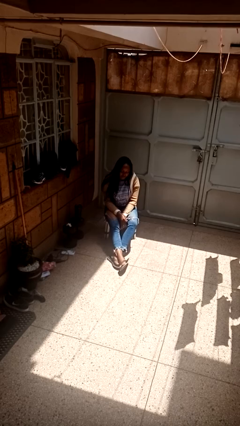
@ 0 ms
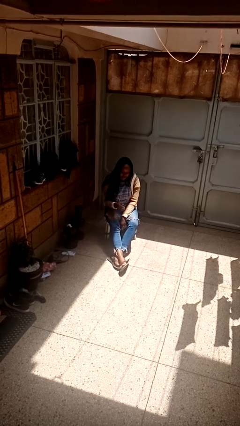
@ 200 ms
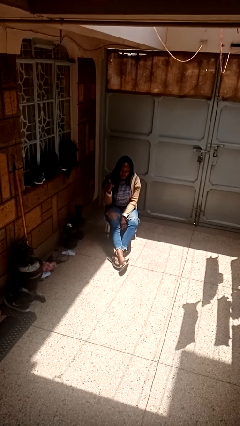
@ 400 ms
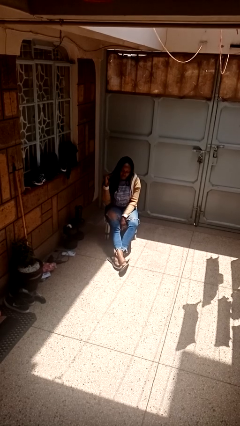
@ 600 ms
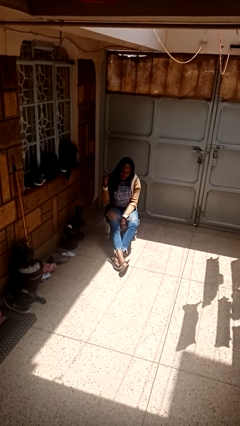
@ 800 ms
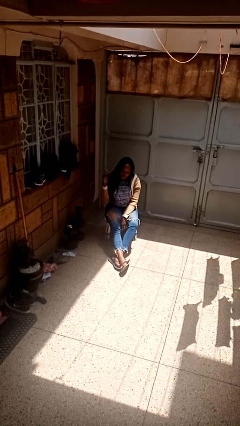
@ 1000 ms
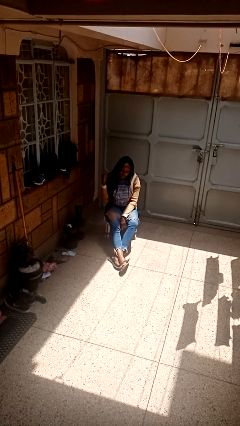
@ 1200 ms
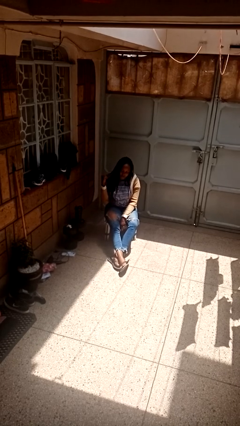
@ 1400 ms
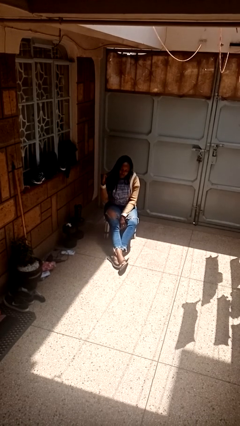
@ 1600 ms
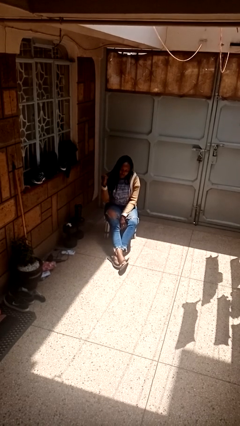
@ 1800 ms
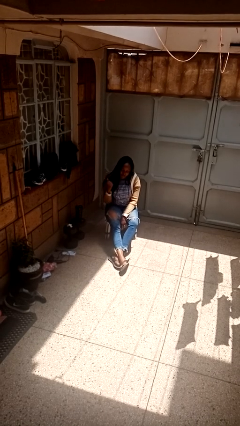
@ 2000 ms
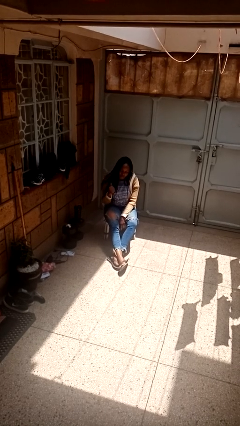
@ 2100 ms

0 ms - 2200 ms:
person gestures behind me

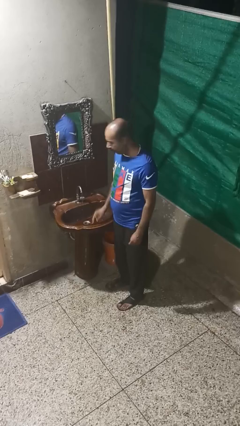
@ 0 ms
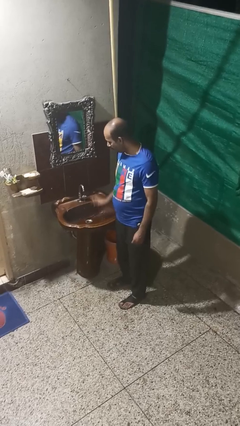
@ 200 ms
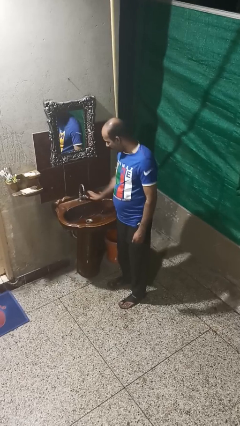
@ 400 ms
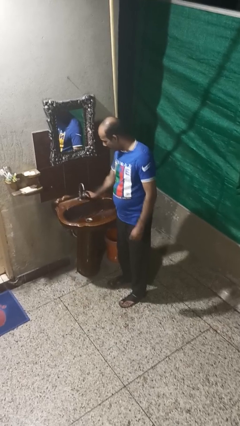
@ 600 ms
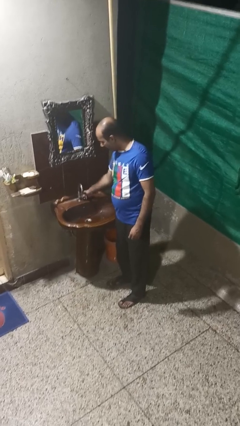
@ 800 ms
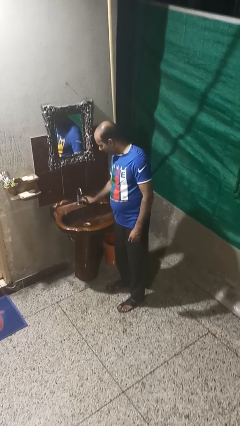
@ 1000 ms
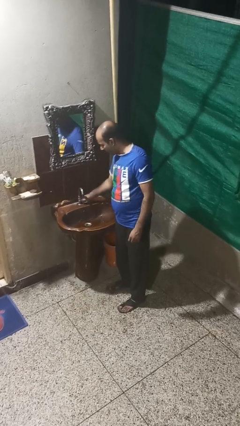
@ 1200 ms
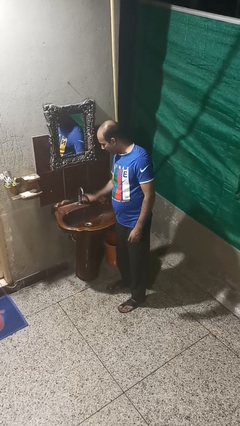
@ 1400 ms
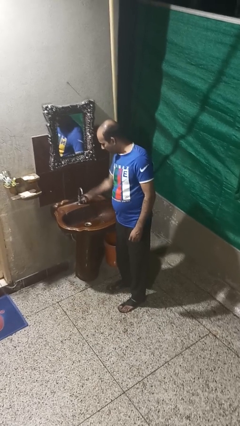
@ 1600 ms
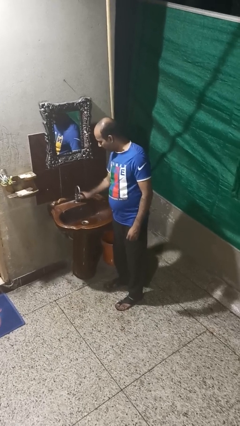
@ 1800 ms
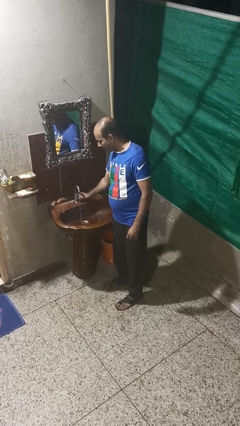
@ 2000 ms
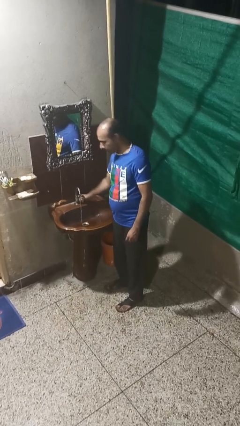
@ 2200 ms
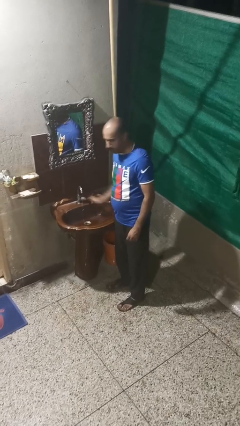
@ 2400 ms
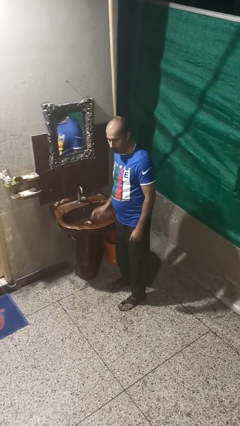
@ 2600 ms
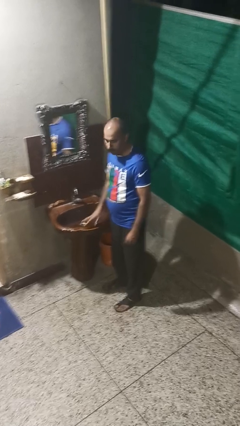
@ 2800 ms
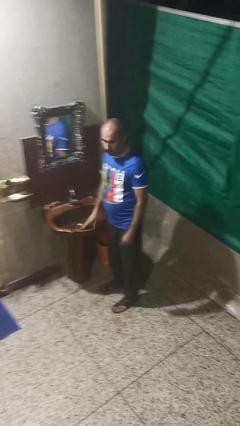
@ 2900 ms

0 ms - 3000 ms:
person turns off faucet

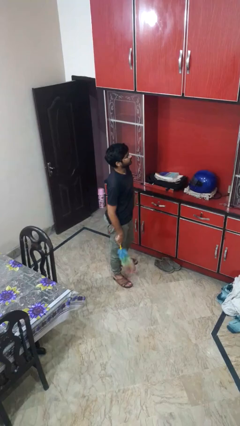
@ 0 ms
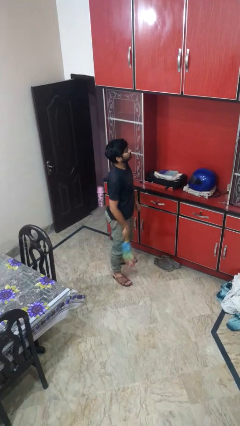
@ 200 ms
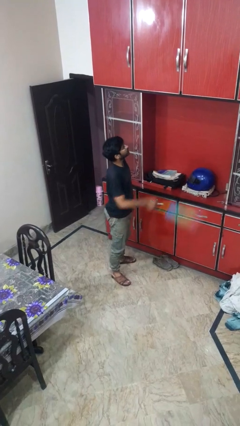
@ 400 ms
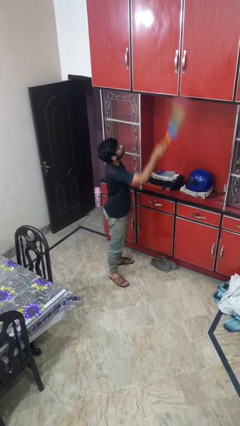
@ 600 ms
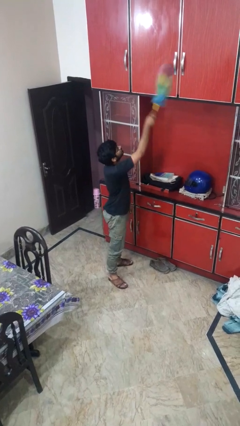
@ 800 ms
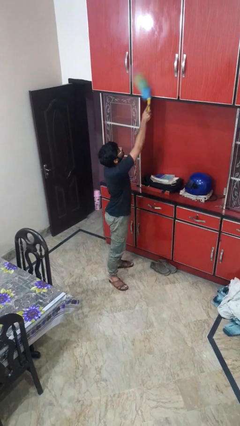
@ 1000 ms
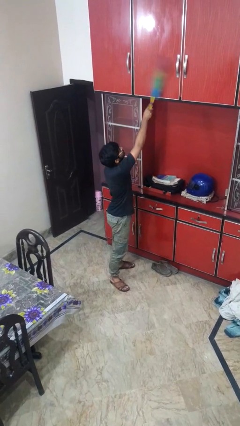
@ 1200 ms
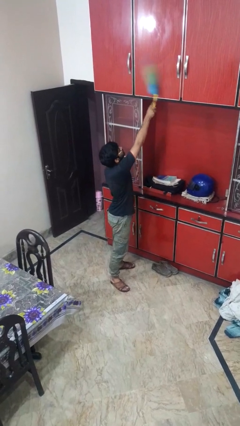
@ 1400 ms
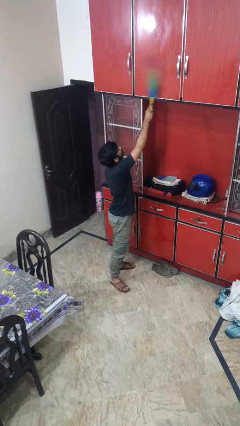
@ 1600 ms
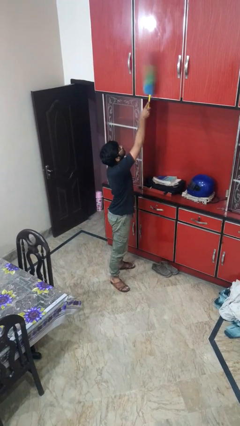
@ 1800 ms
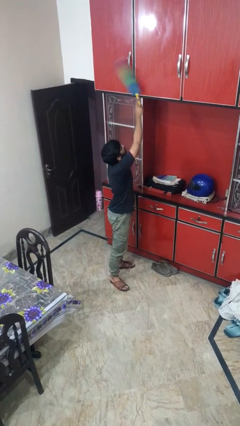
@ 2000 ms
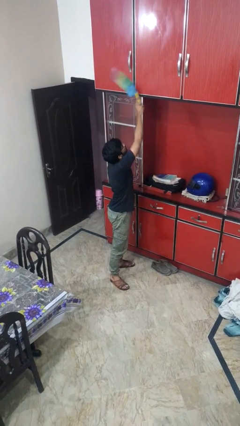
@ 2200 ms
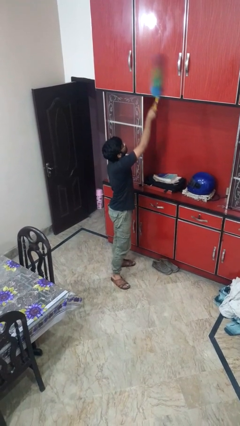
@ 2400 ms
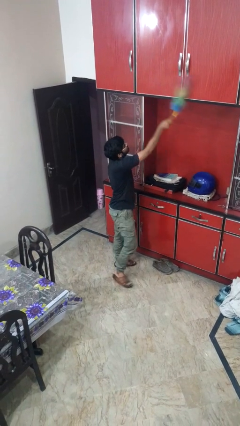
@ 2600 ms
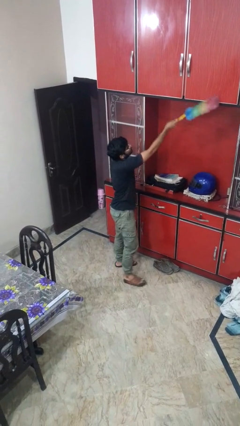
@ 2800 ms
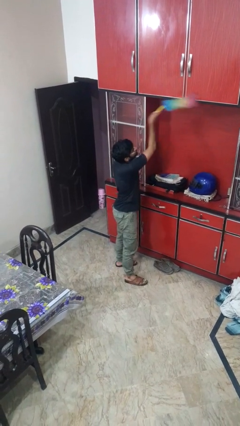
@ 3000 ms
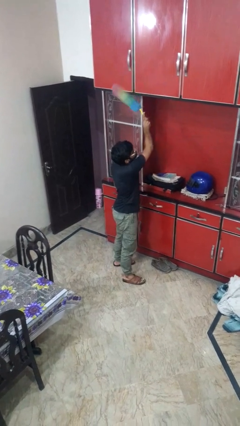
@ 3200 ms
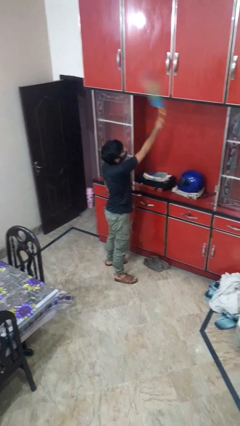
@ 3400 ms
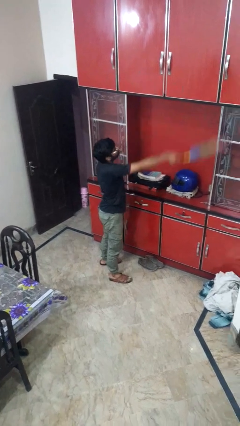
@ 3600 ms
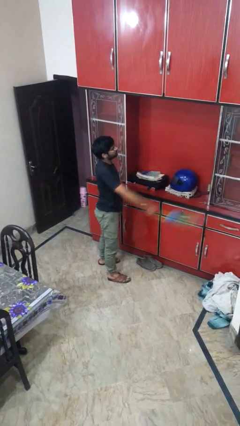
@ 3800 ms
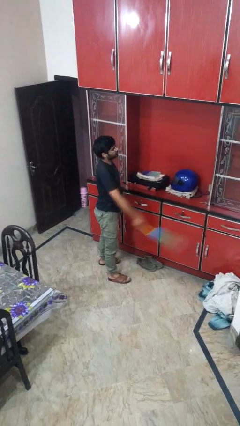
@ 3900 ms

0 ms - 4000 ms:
person dusts furniture

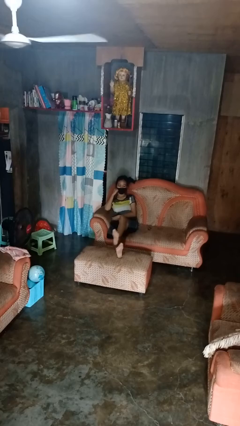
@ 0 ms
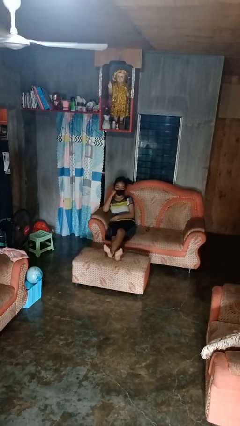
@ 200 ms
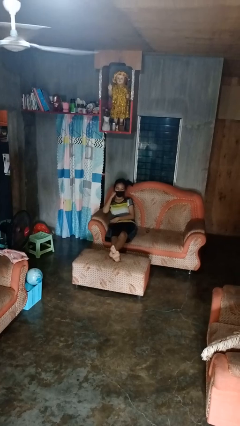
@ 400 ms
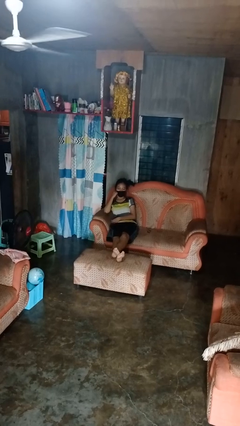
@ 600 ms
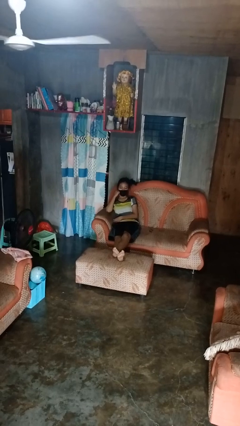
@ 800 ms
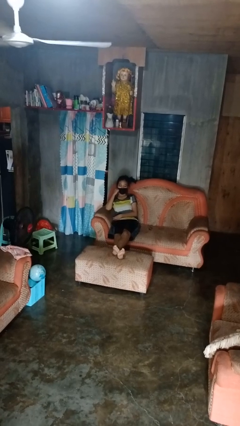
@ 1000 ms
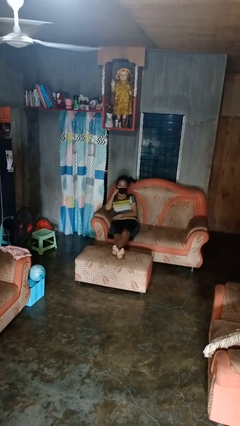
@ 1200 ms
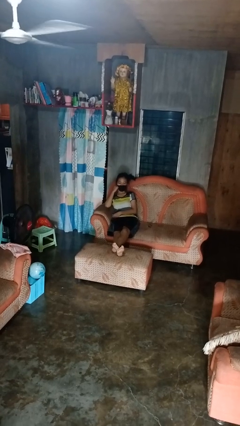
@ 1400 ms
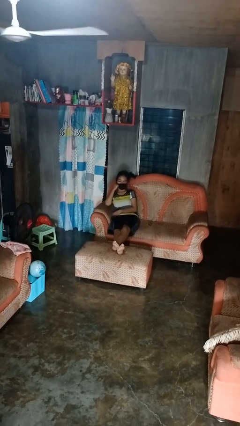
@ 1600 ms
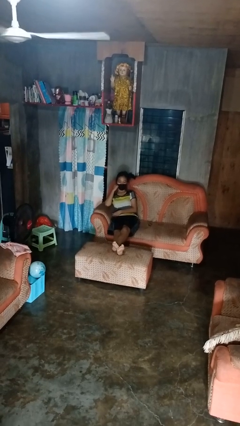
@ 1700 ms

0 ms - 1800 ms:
person puts feet up

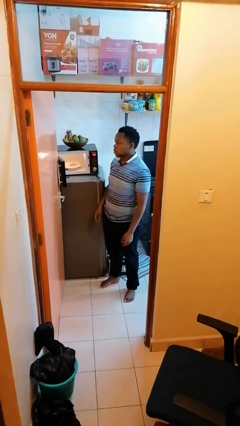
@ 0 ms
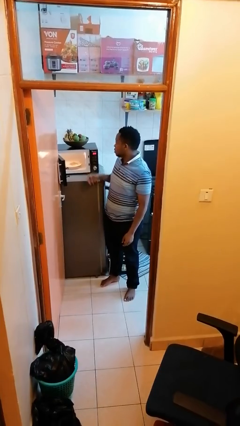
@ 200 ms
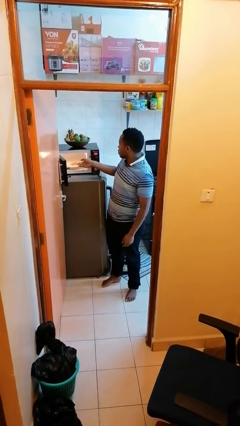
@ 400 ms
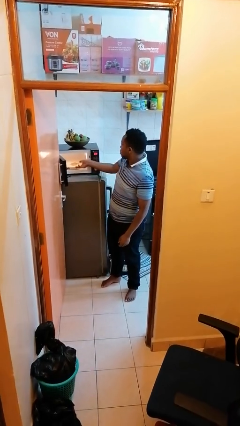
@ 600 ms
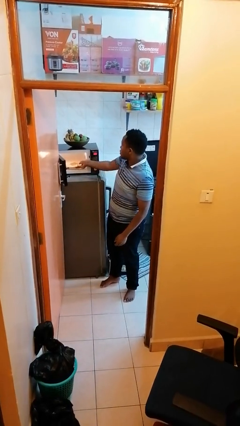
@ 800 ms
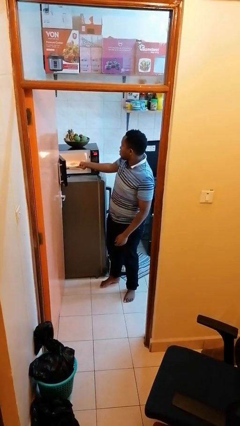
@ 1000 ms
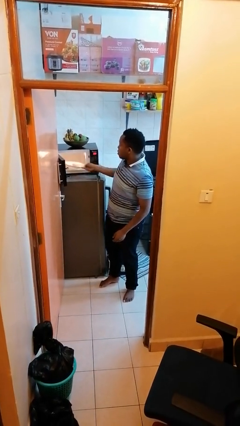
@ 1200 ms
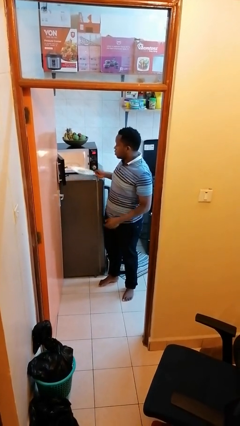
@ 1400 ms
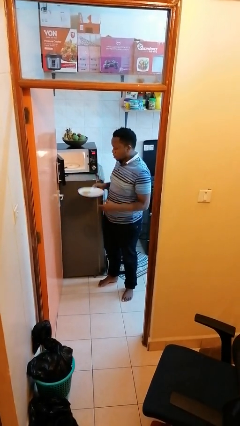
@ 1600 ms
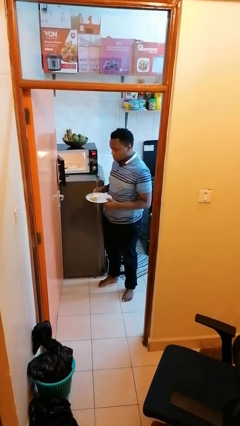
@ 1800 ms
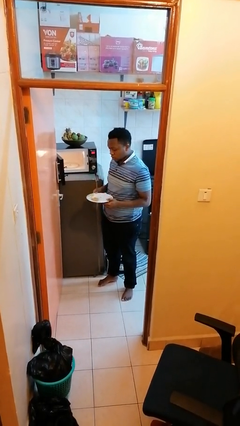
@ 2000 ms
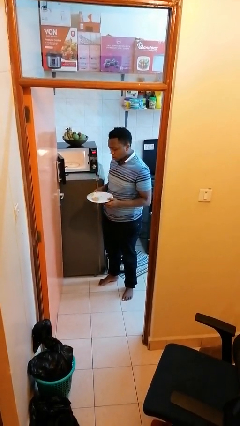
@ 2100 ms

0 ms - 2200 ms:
person takes object from microwave

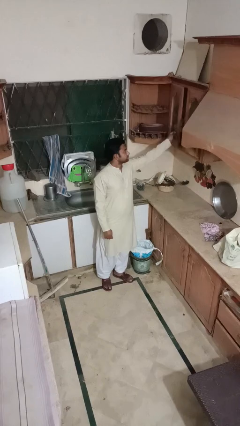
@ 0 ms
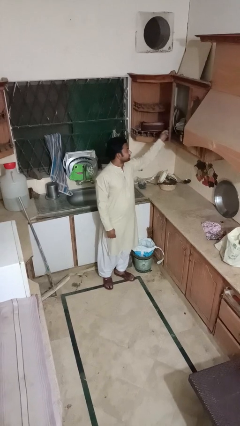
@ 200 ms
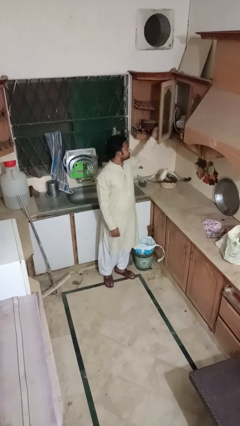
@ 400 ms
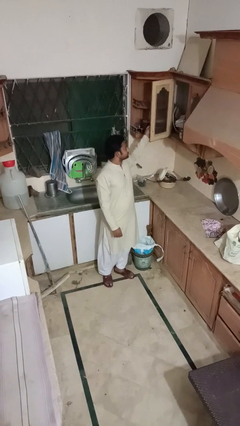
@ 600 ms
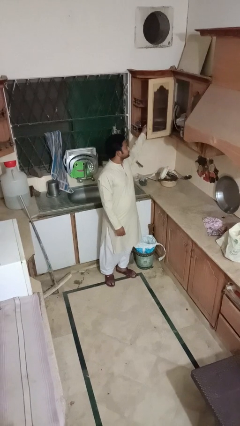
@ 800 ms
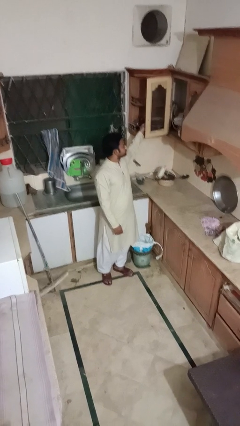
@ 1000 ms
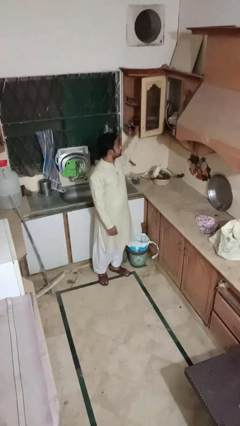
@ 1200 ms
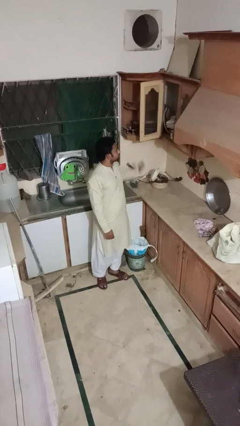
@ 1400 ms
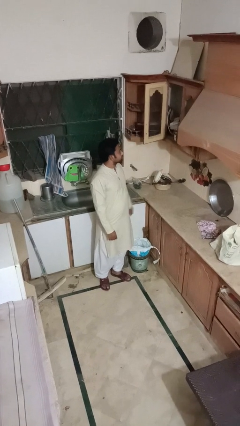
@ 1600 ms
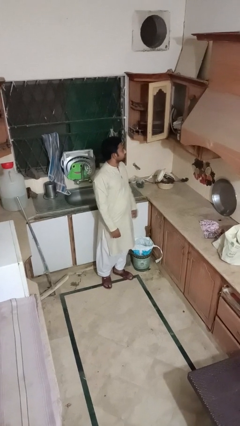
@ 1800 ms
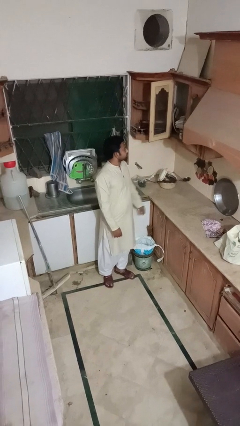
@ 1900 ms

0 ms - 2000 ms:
person opens cabinet

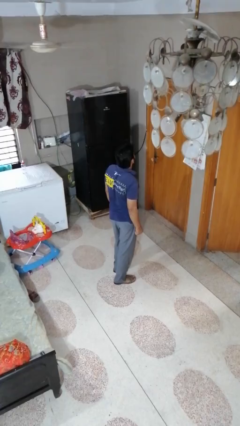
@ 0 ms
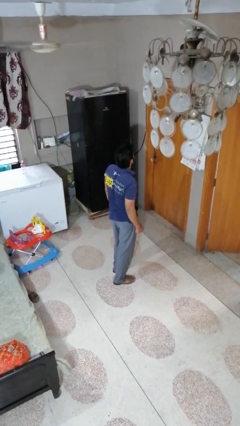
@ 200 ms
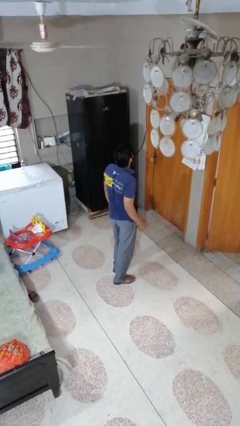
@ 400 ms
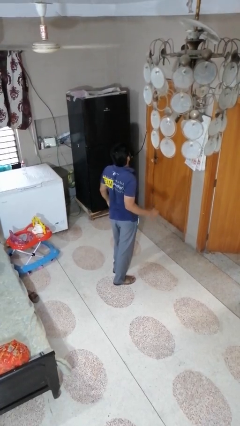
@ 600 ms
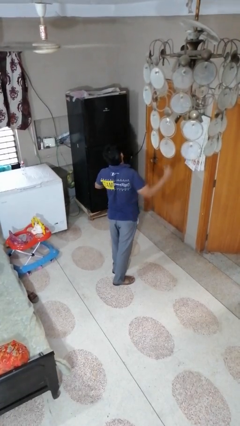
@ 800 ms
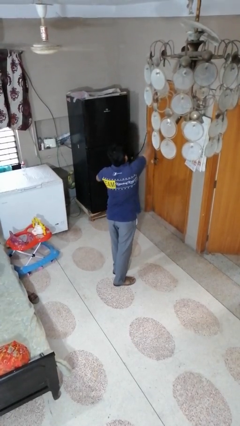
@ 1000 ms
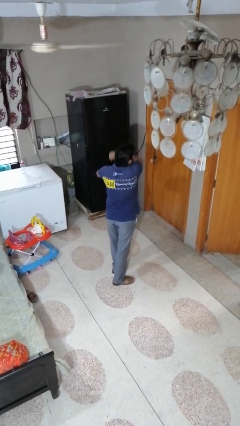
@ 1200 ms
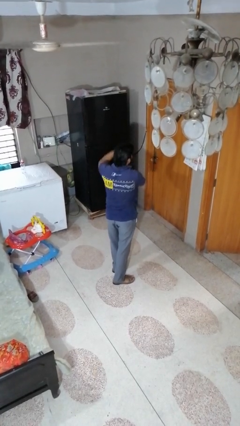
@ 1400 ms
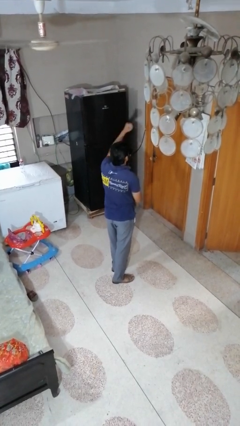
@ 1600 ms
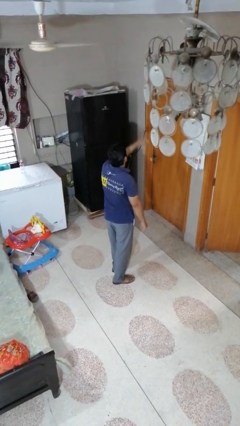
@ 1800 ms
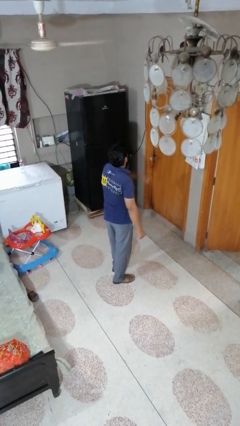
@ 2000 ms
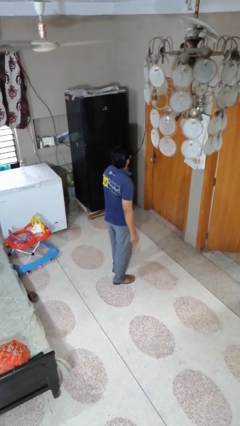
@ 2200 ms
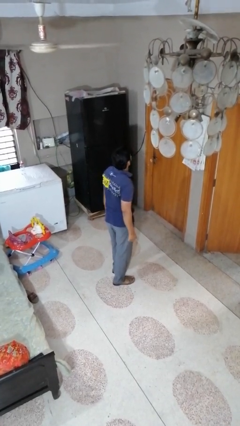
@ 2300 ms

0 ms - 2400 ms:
person punches
